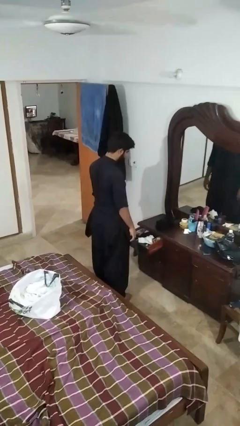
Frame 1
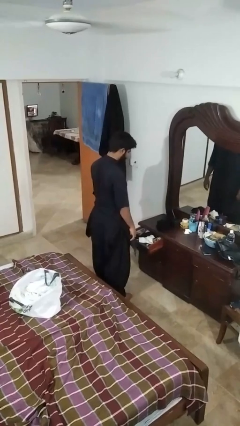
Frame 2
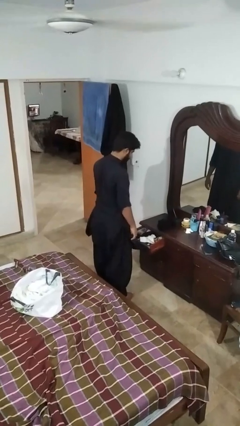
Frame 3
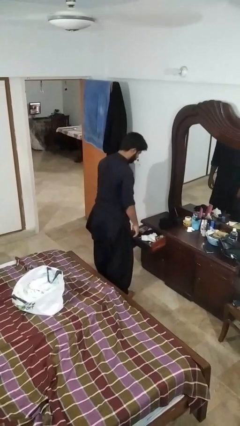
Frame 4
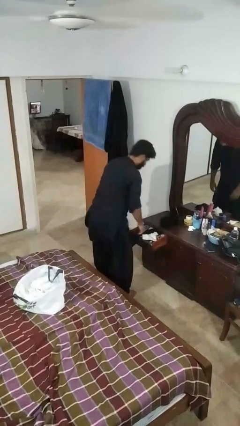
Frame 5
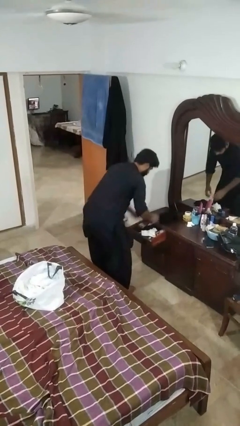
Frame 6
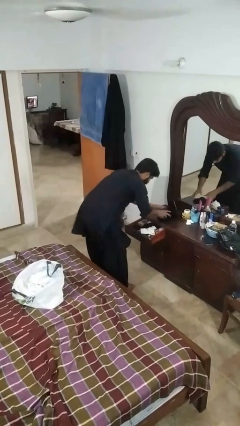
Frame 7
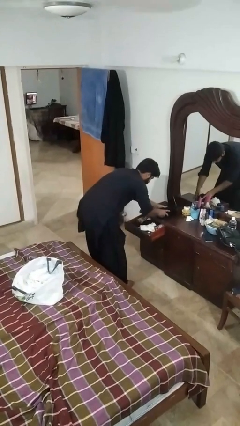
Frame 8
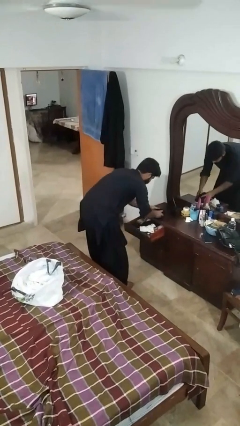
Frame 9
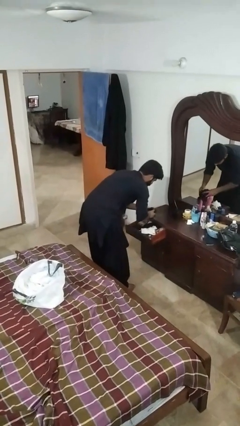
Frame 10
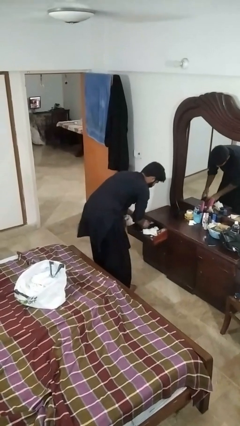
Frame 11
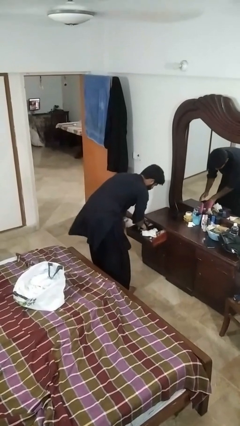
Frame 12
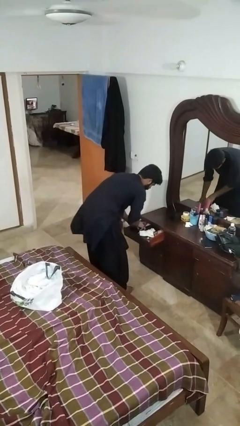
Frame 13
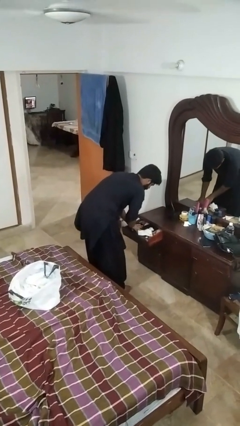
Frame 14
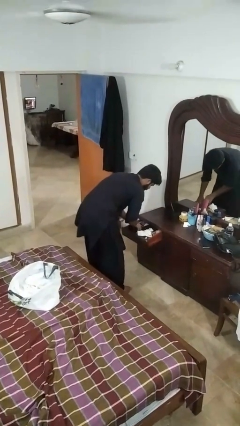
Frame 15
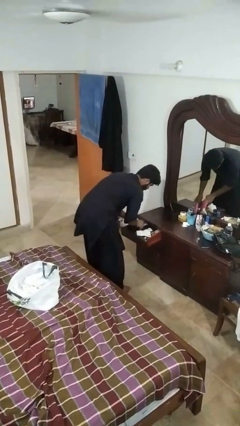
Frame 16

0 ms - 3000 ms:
person puts clothes into dresser

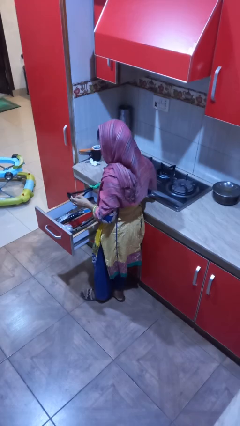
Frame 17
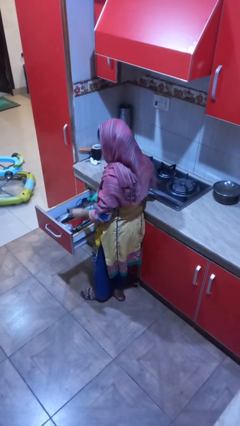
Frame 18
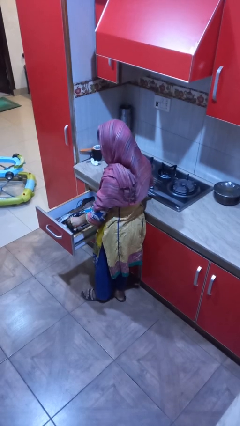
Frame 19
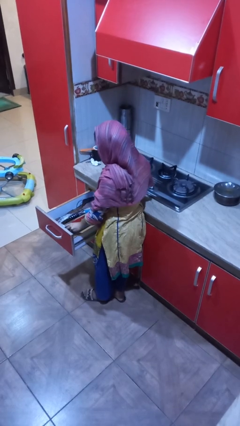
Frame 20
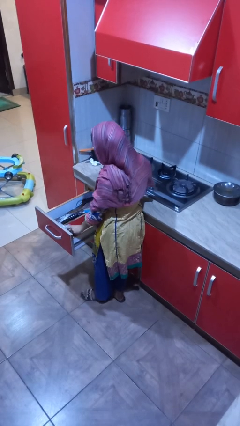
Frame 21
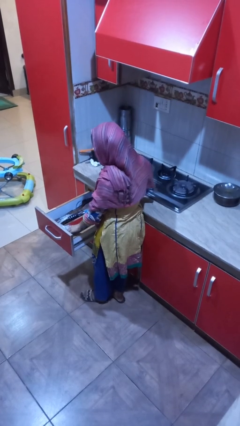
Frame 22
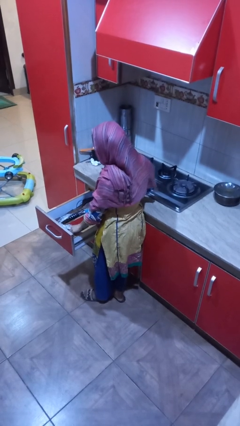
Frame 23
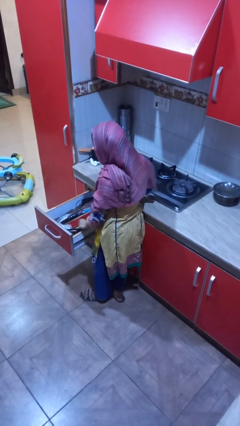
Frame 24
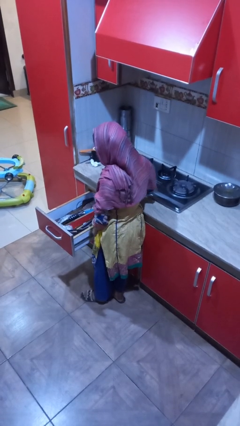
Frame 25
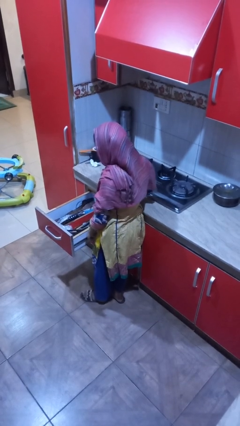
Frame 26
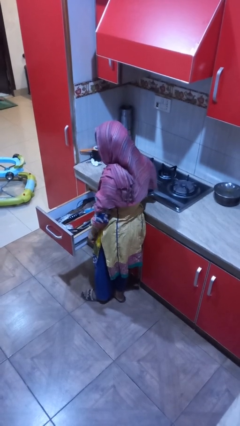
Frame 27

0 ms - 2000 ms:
person puts object into kitchen drawer

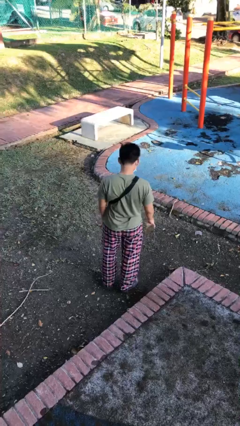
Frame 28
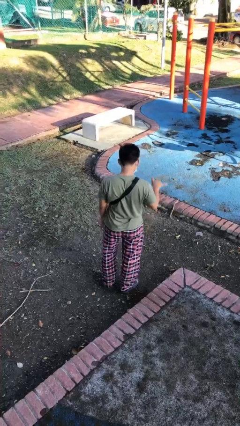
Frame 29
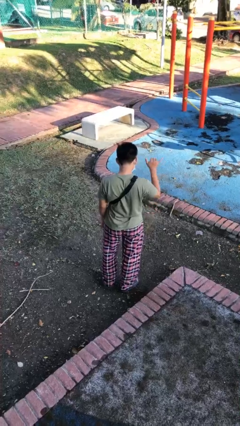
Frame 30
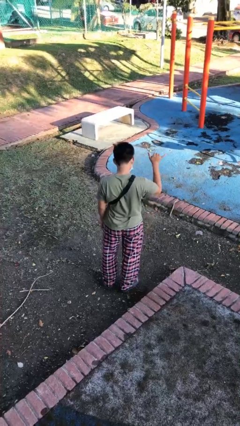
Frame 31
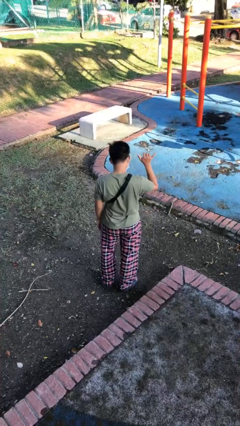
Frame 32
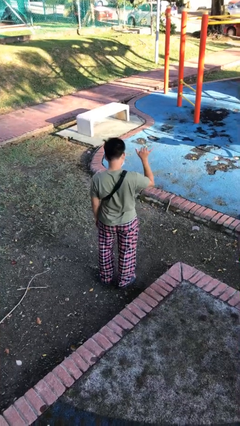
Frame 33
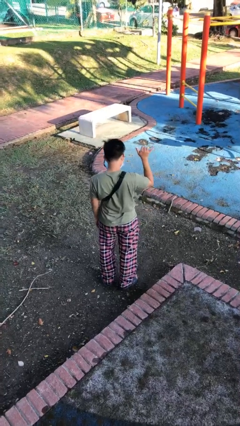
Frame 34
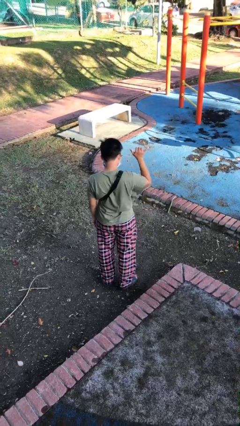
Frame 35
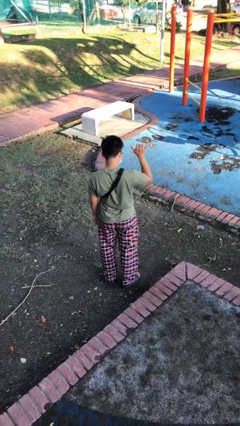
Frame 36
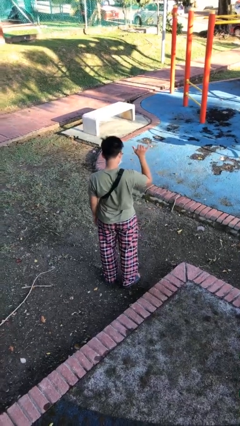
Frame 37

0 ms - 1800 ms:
person gestures hang loose

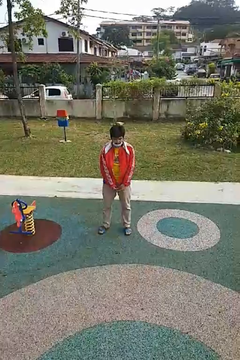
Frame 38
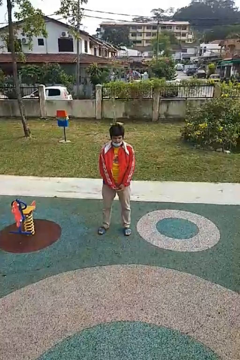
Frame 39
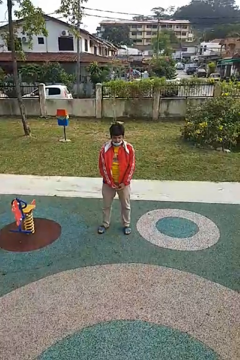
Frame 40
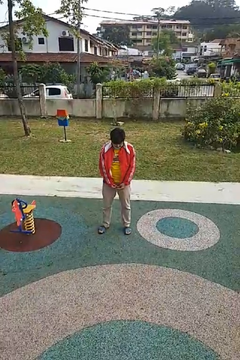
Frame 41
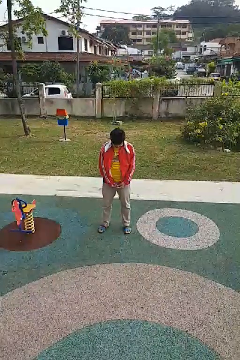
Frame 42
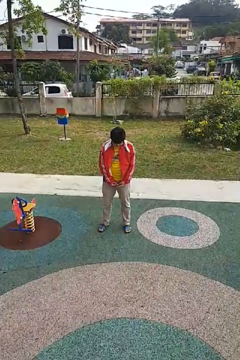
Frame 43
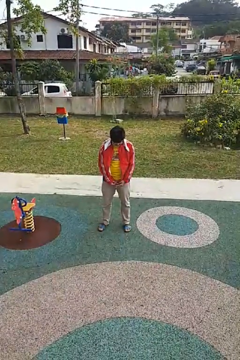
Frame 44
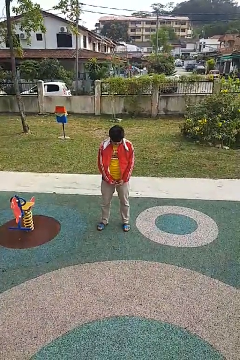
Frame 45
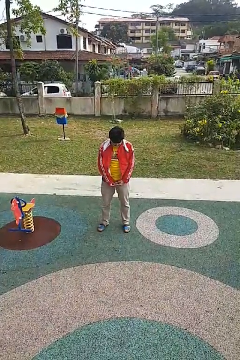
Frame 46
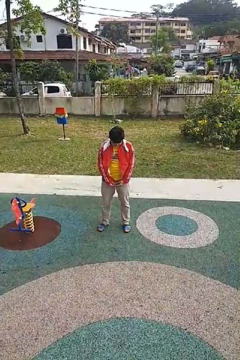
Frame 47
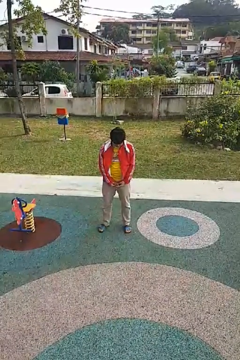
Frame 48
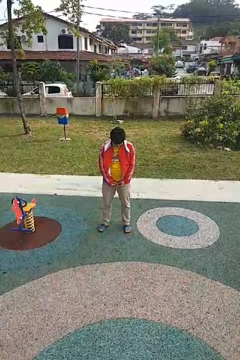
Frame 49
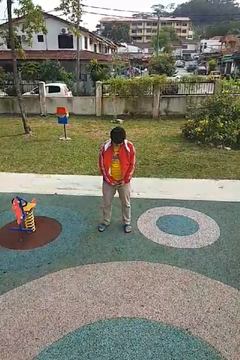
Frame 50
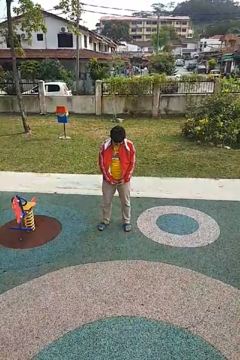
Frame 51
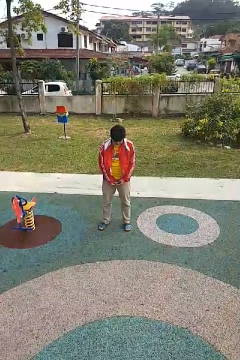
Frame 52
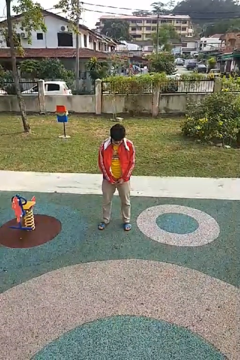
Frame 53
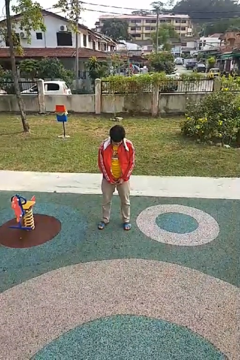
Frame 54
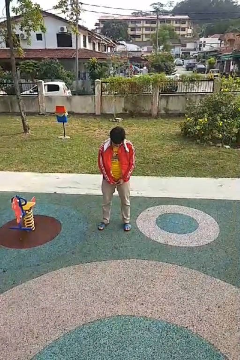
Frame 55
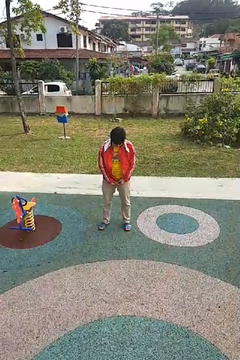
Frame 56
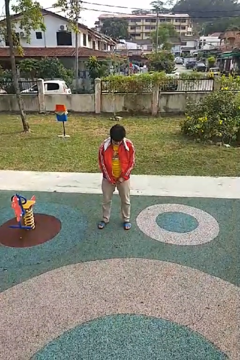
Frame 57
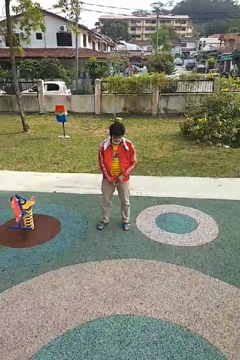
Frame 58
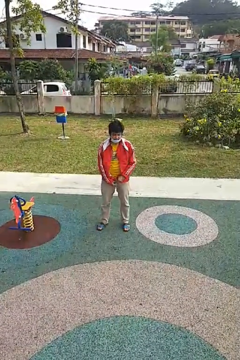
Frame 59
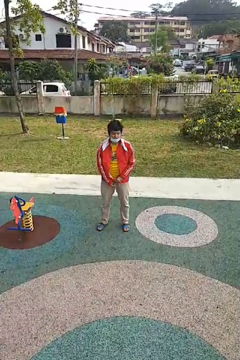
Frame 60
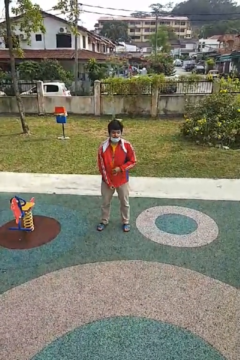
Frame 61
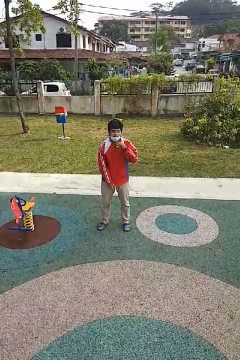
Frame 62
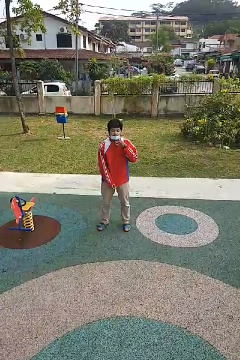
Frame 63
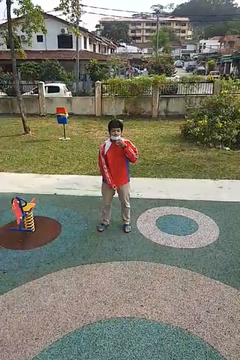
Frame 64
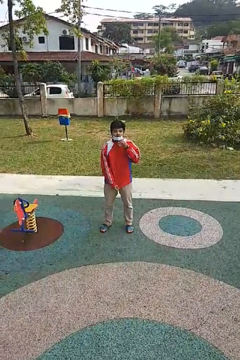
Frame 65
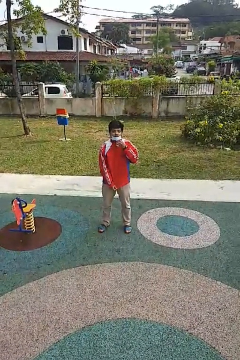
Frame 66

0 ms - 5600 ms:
person zips up jacket

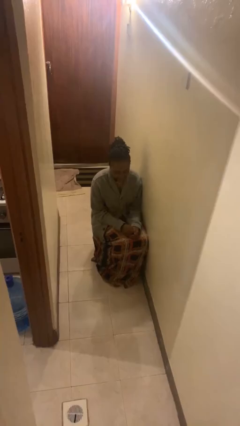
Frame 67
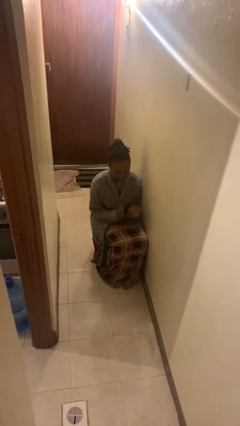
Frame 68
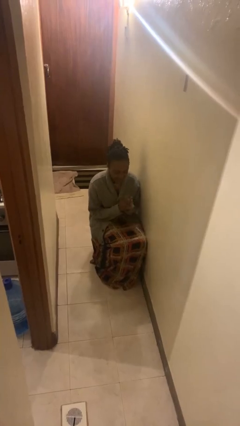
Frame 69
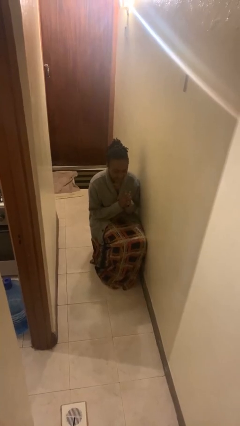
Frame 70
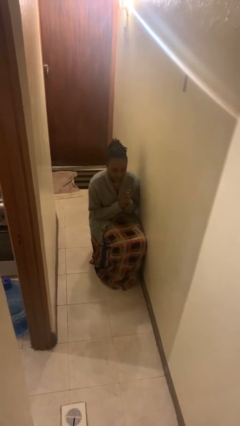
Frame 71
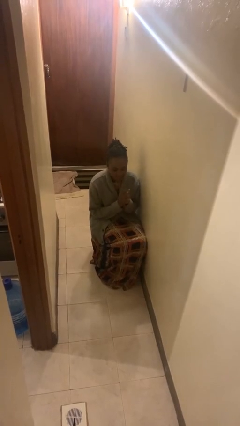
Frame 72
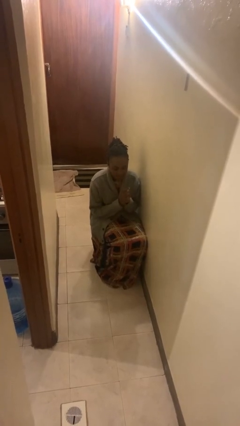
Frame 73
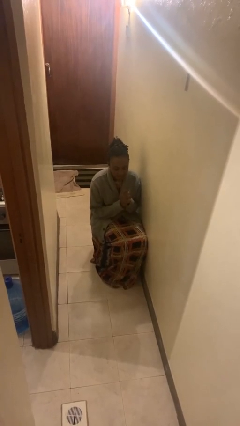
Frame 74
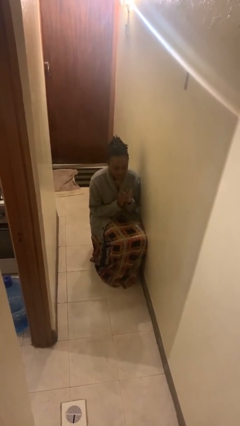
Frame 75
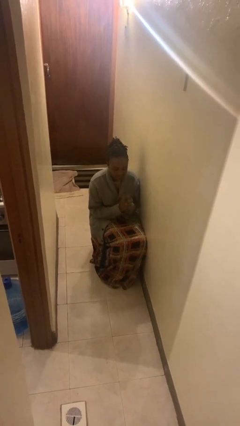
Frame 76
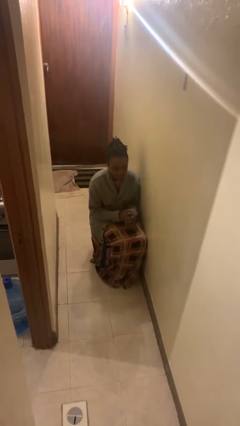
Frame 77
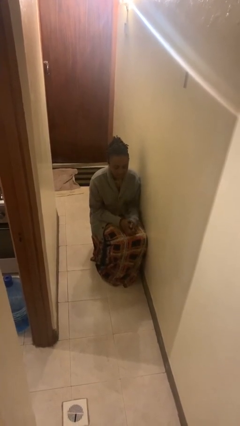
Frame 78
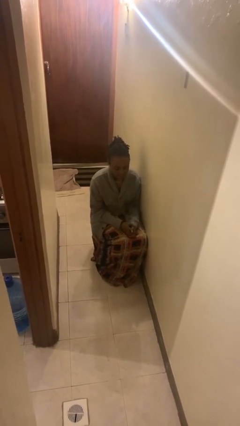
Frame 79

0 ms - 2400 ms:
person claps hands

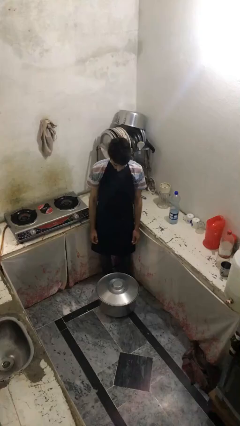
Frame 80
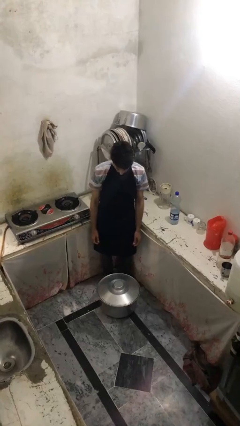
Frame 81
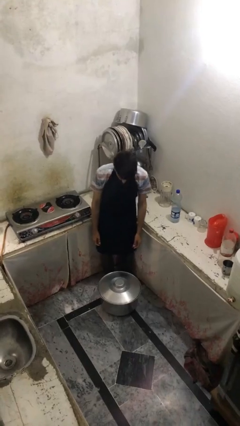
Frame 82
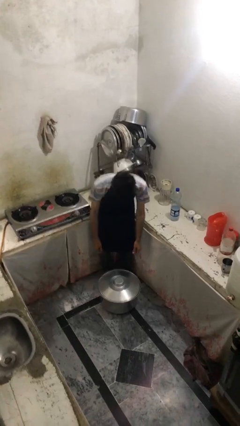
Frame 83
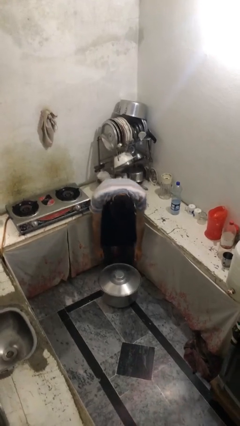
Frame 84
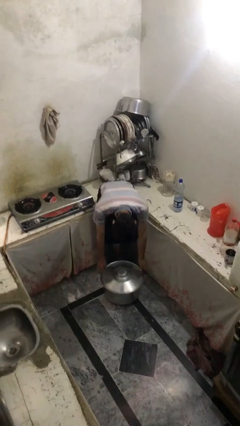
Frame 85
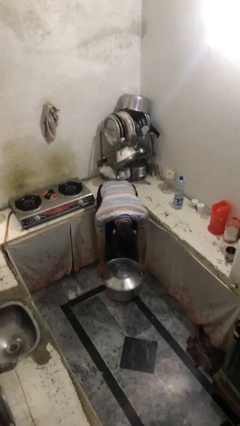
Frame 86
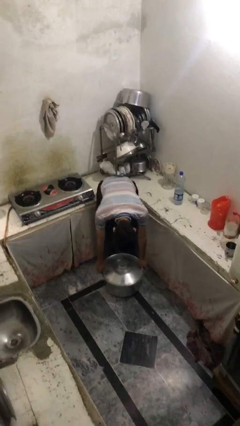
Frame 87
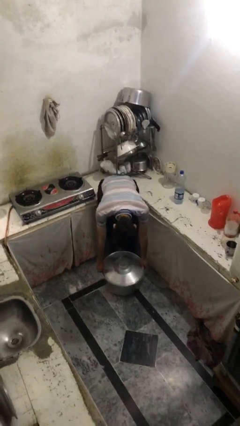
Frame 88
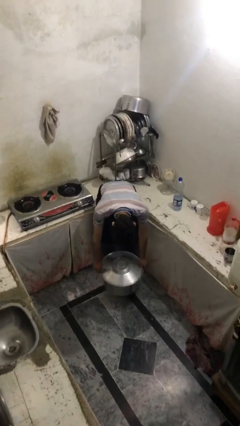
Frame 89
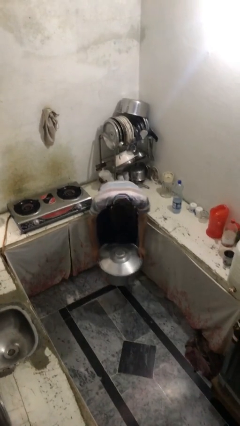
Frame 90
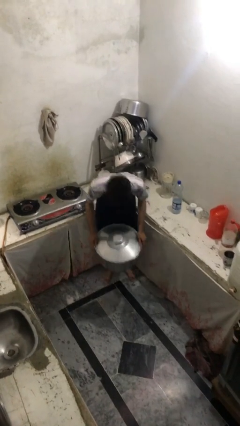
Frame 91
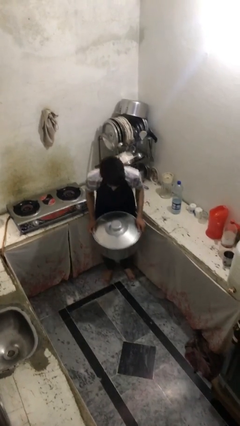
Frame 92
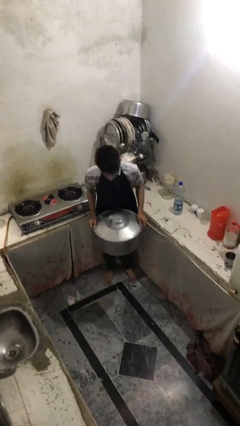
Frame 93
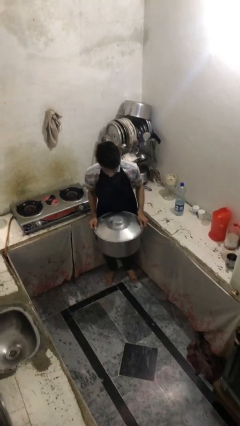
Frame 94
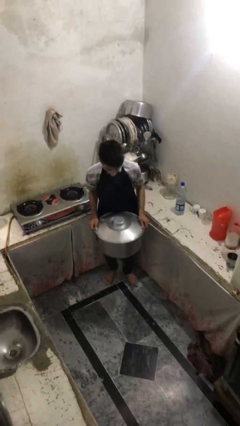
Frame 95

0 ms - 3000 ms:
person picks up object from floor

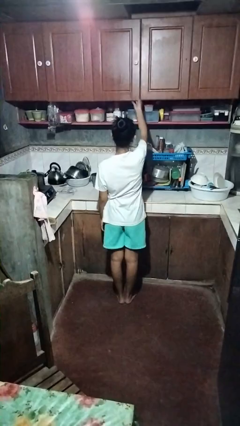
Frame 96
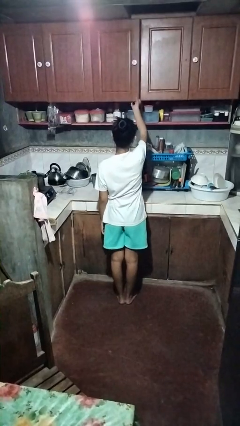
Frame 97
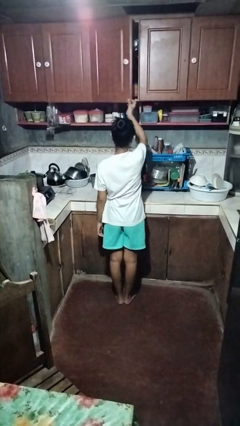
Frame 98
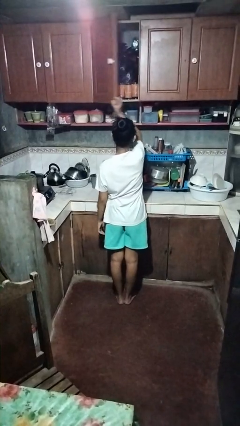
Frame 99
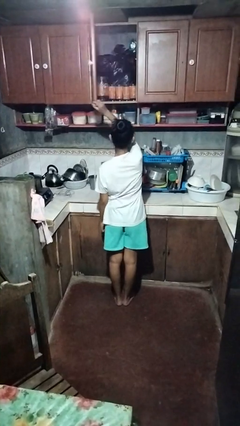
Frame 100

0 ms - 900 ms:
person opens cabinet
